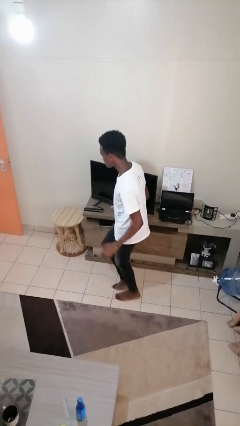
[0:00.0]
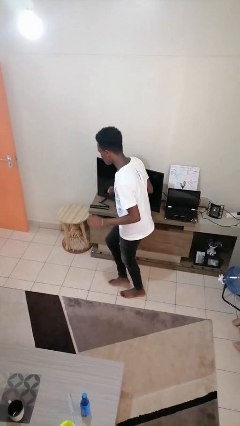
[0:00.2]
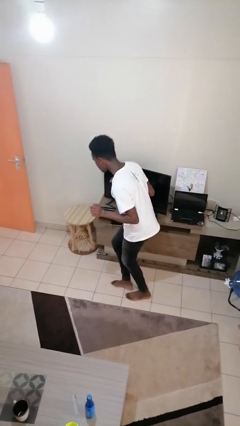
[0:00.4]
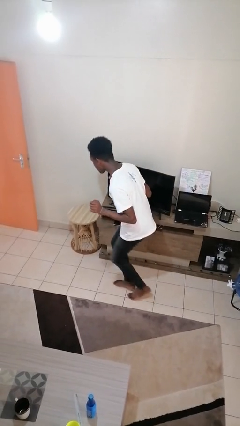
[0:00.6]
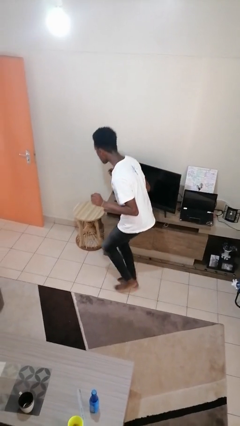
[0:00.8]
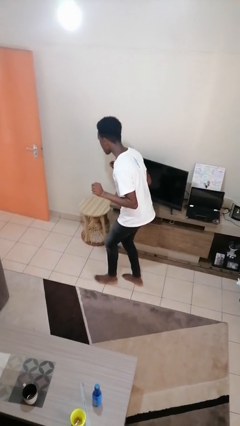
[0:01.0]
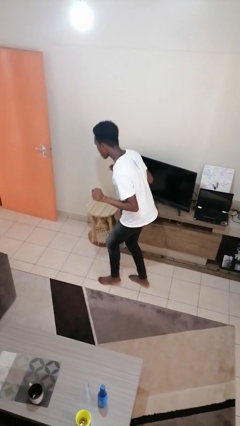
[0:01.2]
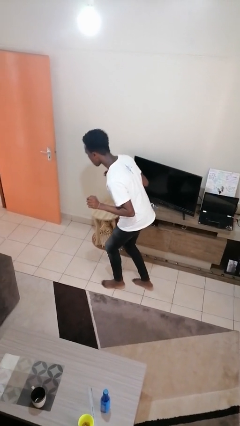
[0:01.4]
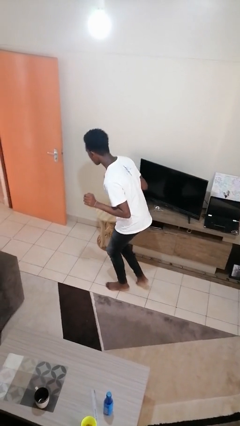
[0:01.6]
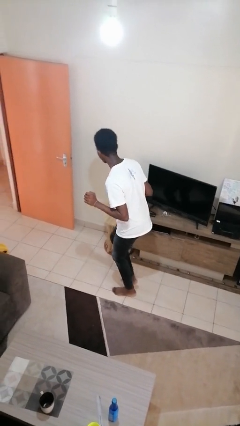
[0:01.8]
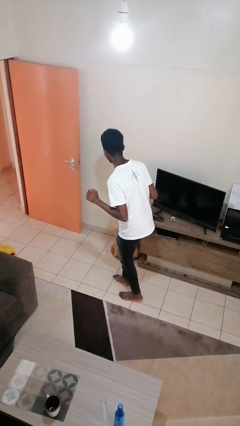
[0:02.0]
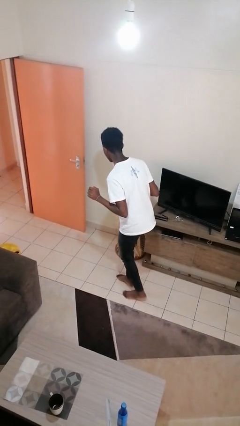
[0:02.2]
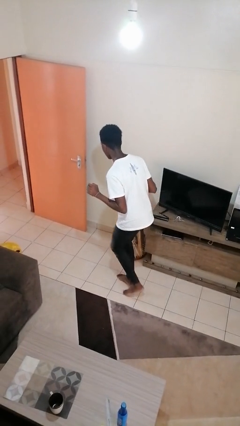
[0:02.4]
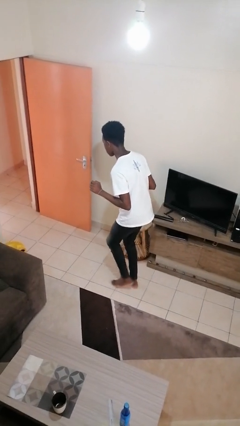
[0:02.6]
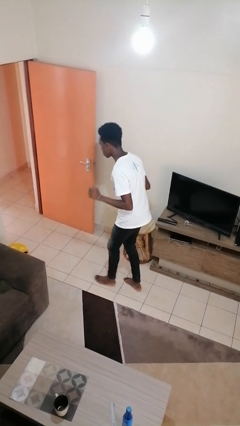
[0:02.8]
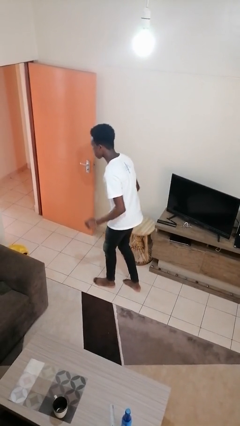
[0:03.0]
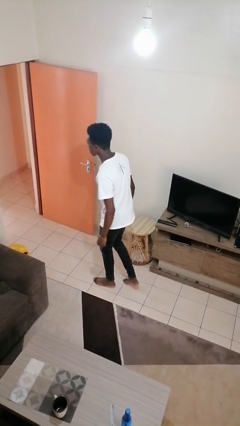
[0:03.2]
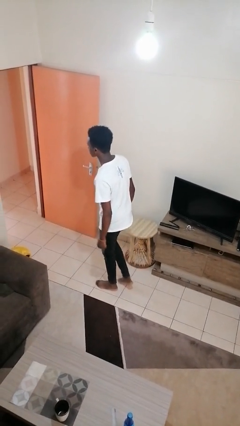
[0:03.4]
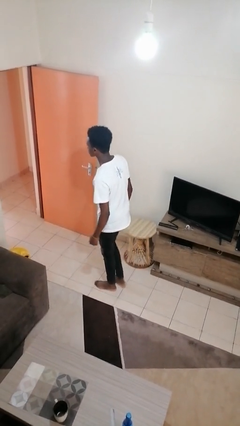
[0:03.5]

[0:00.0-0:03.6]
person walks tiptoe

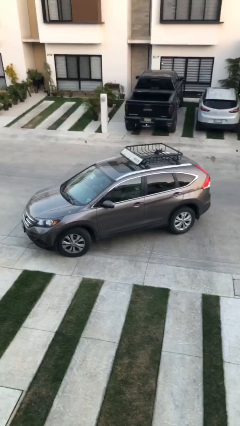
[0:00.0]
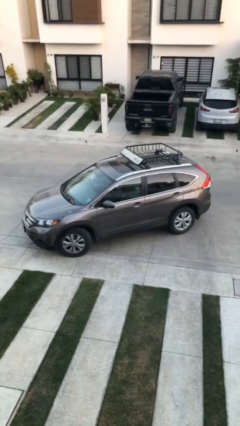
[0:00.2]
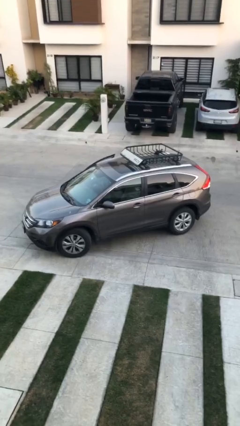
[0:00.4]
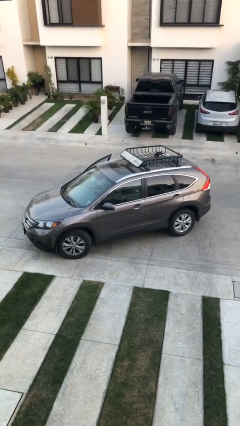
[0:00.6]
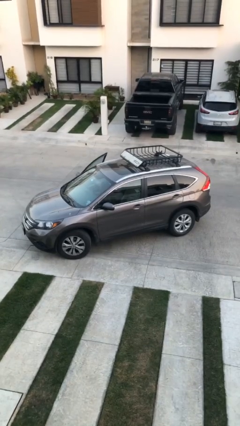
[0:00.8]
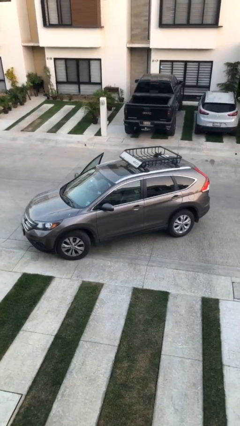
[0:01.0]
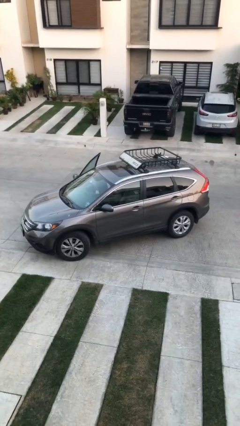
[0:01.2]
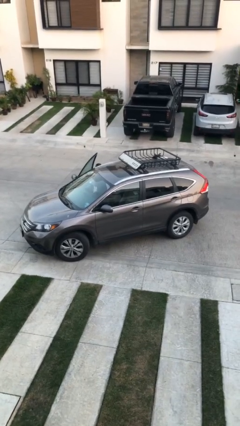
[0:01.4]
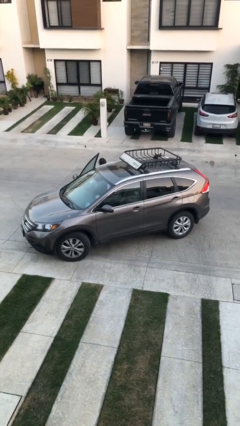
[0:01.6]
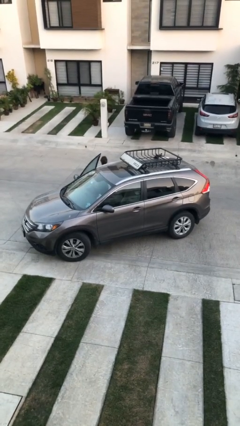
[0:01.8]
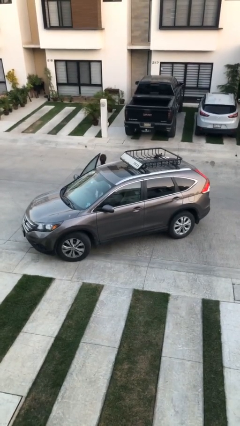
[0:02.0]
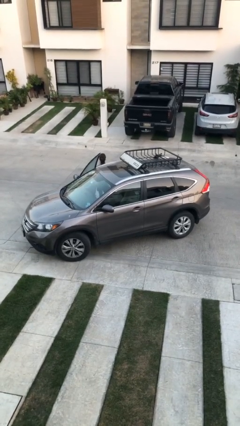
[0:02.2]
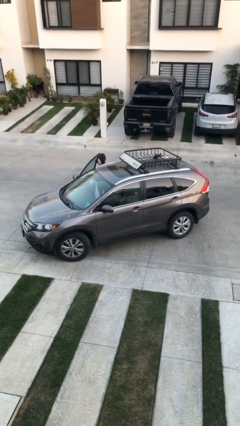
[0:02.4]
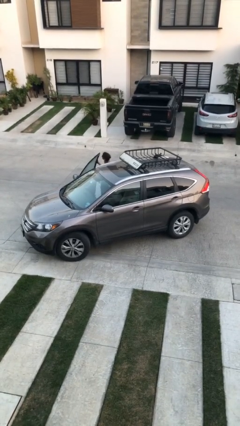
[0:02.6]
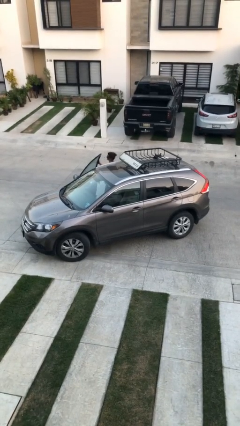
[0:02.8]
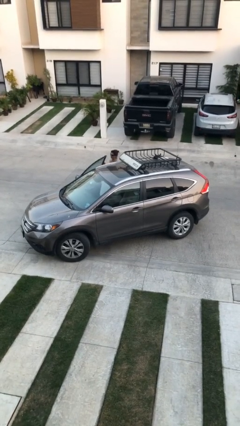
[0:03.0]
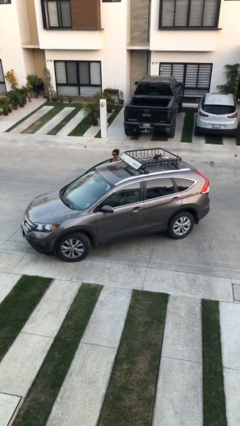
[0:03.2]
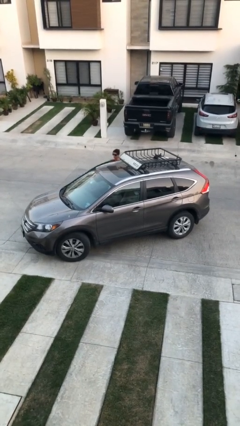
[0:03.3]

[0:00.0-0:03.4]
car drops off person

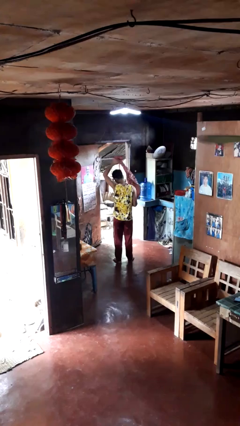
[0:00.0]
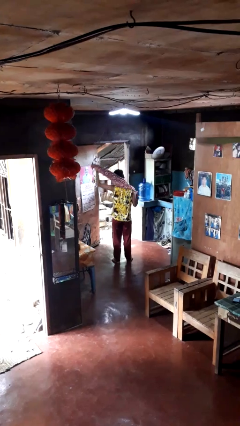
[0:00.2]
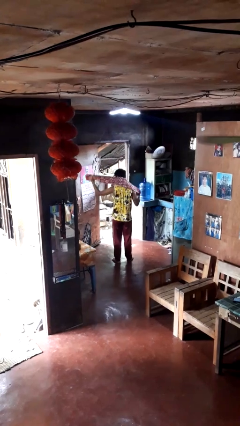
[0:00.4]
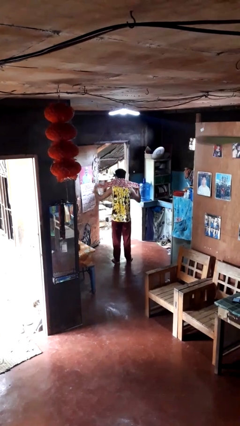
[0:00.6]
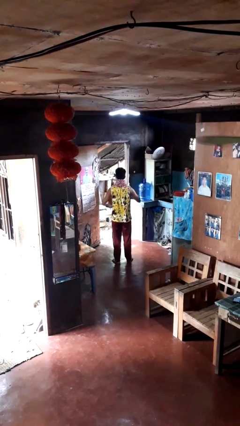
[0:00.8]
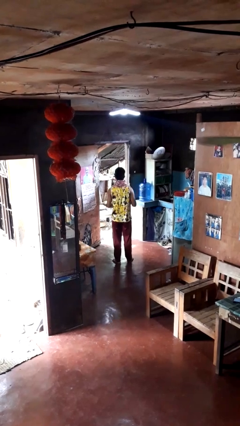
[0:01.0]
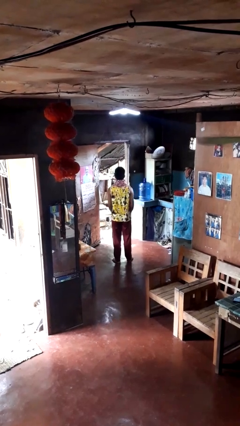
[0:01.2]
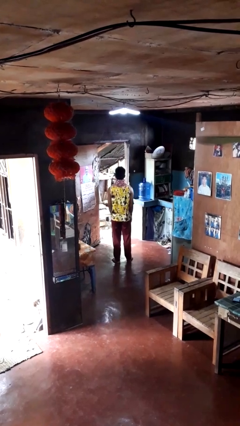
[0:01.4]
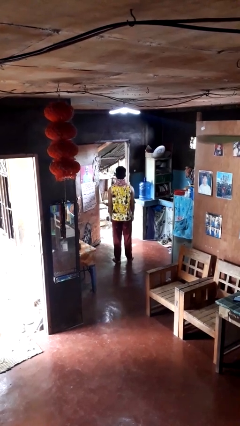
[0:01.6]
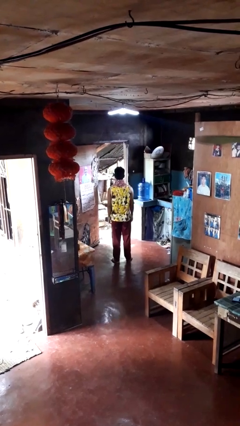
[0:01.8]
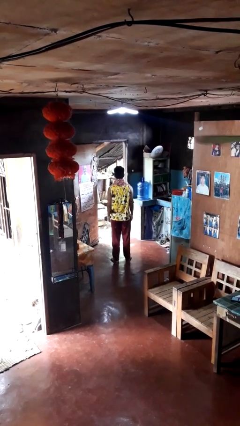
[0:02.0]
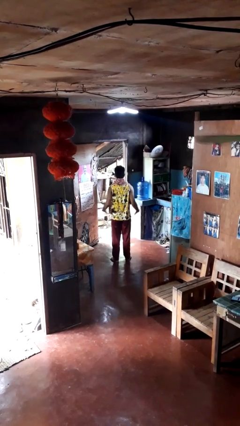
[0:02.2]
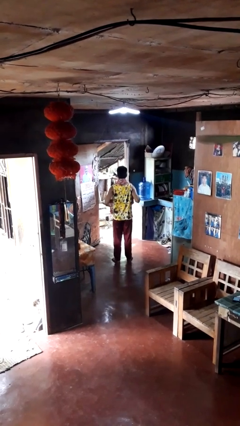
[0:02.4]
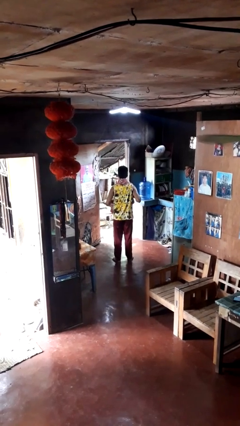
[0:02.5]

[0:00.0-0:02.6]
person puts on scarf

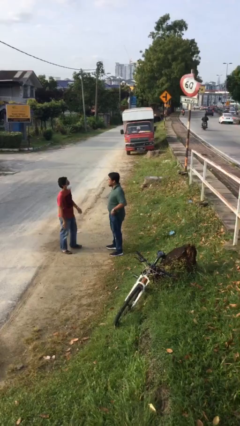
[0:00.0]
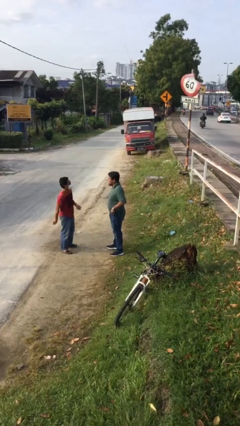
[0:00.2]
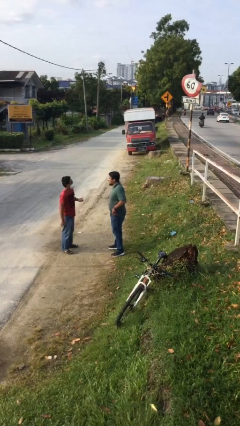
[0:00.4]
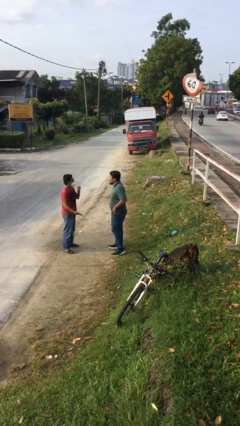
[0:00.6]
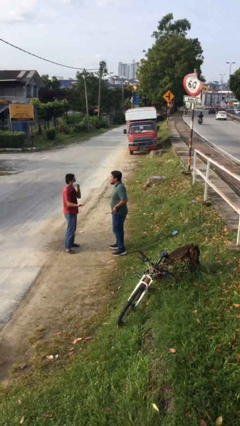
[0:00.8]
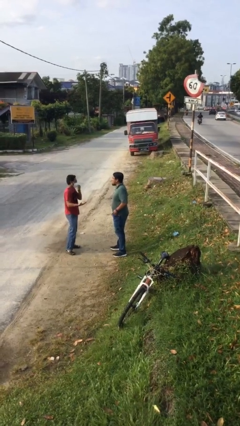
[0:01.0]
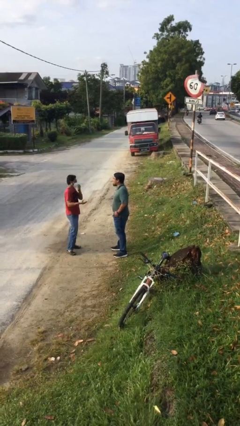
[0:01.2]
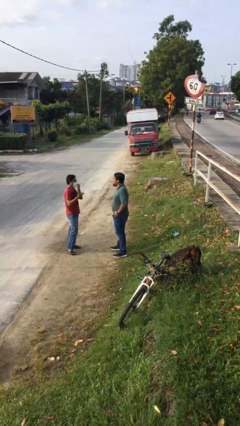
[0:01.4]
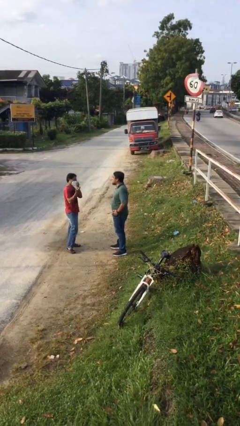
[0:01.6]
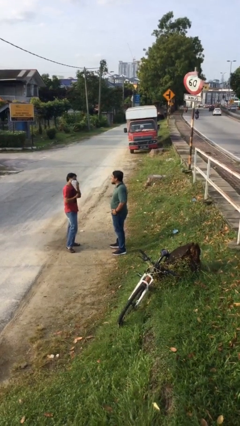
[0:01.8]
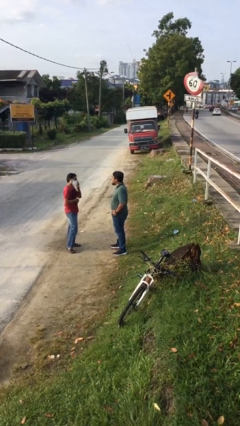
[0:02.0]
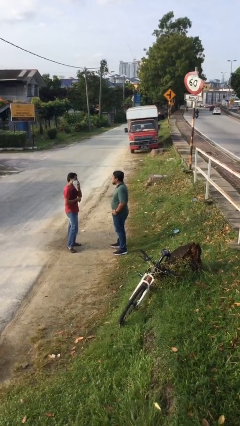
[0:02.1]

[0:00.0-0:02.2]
person talks to person

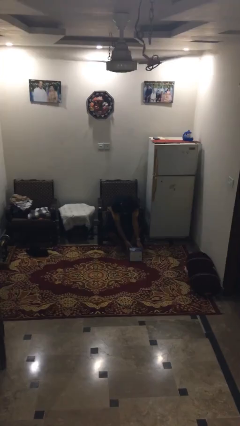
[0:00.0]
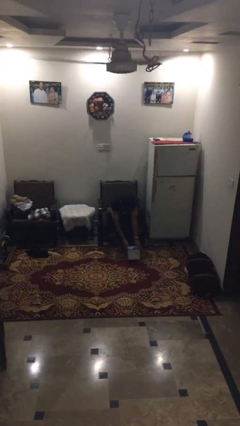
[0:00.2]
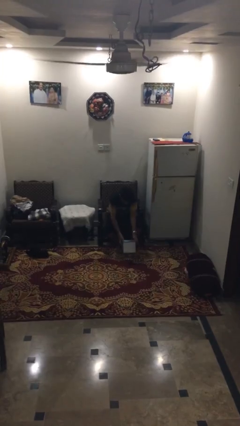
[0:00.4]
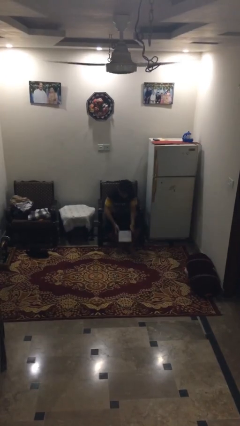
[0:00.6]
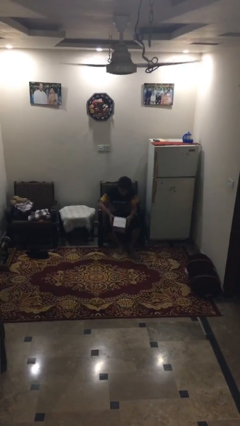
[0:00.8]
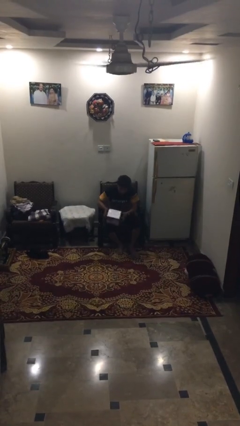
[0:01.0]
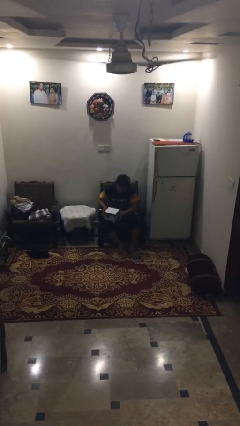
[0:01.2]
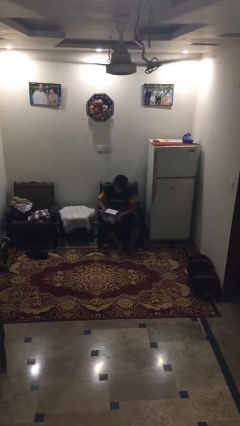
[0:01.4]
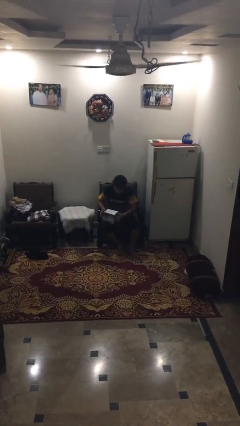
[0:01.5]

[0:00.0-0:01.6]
person picks up object from floor

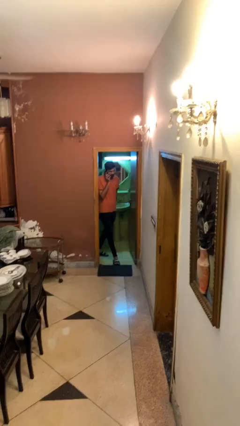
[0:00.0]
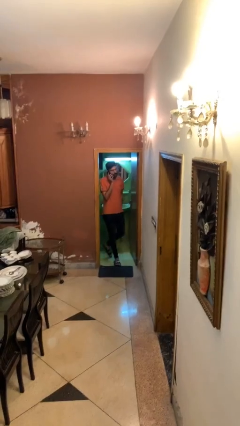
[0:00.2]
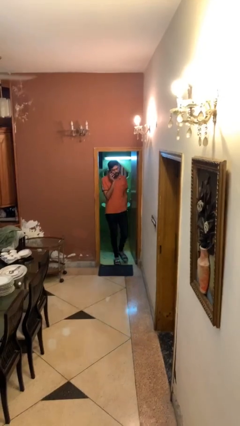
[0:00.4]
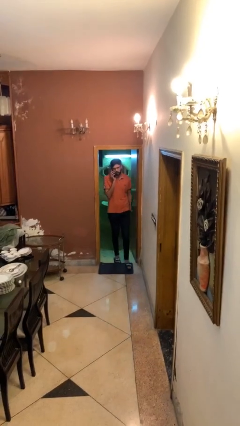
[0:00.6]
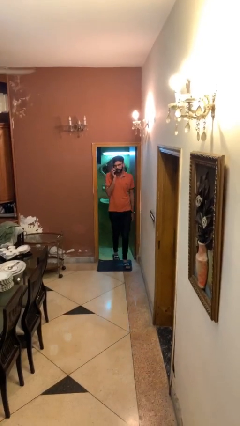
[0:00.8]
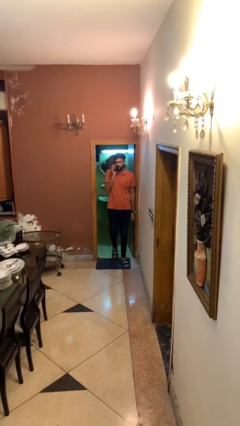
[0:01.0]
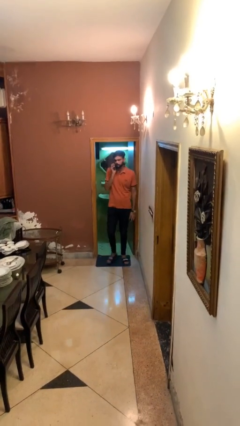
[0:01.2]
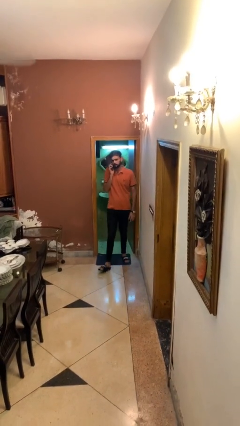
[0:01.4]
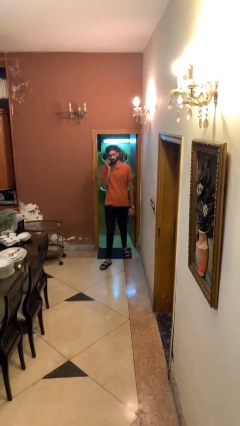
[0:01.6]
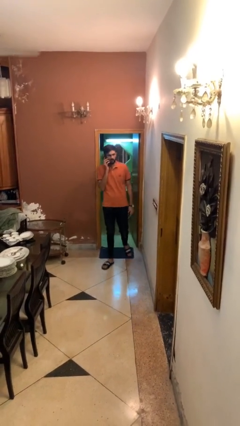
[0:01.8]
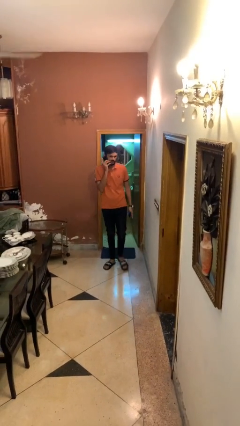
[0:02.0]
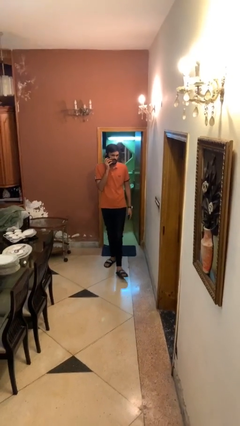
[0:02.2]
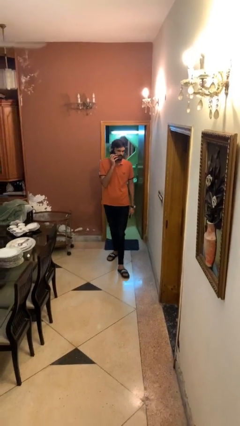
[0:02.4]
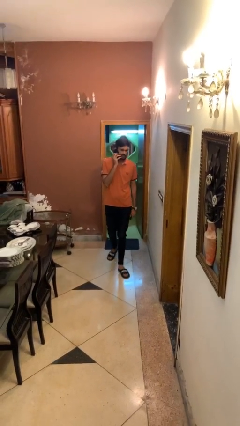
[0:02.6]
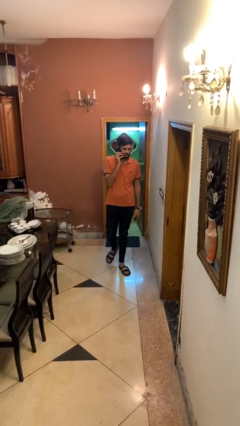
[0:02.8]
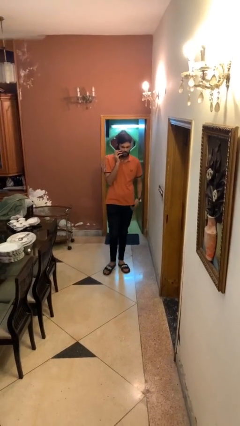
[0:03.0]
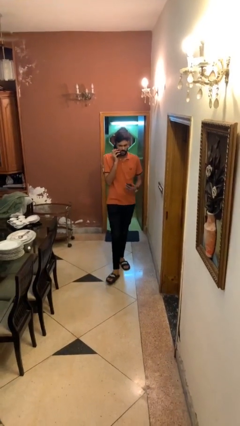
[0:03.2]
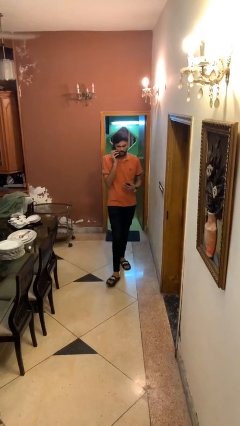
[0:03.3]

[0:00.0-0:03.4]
person enters scene through structure

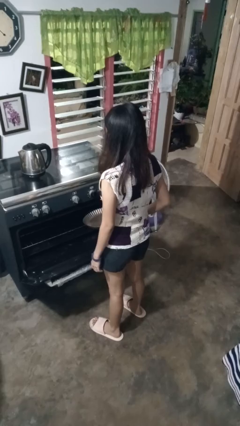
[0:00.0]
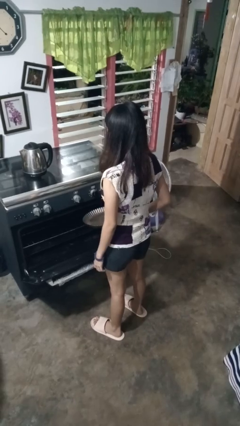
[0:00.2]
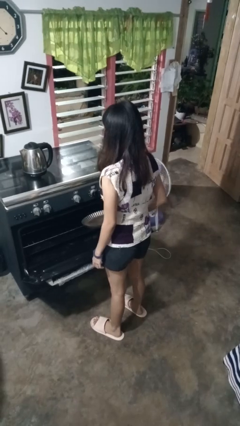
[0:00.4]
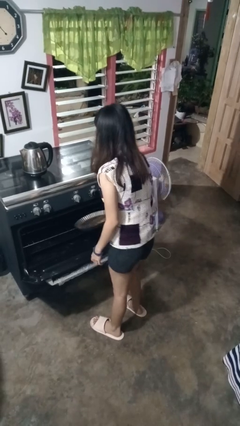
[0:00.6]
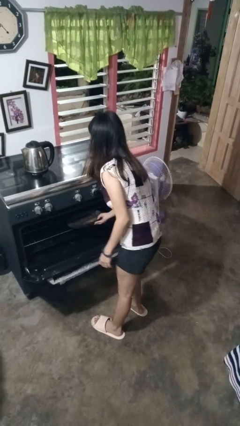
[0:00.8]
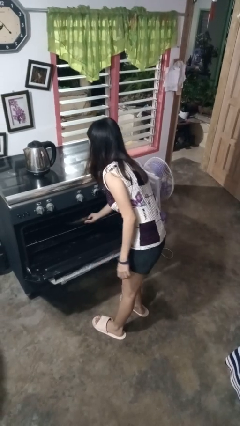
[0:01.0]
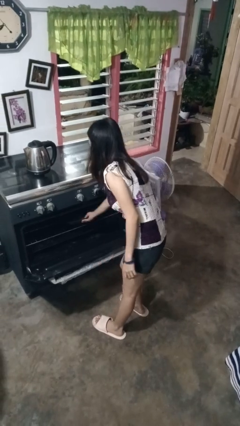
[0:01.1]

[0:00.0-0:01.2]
person puts object into oven
